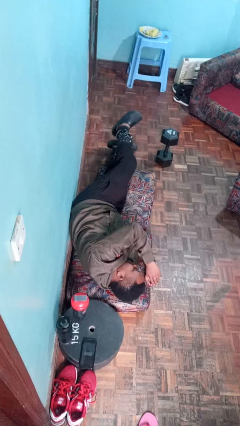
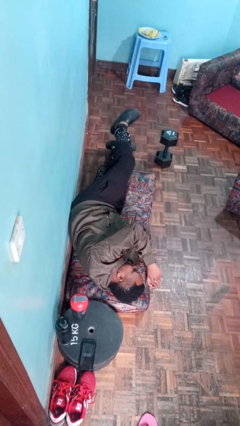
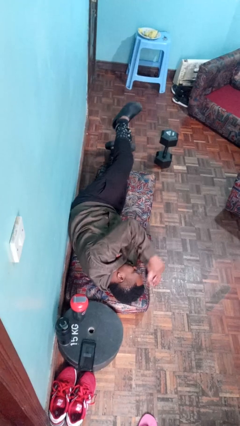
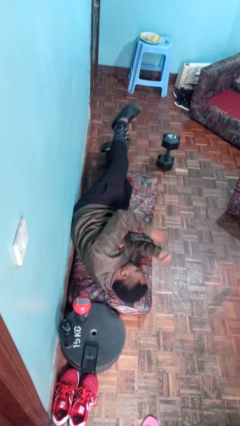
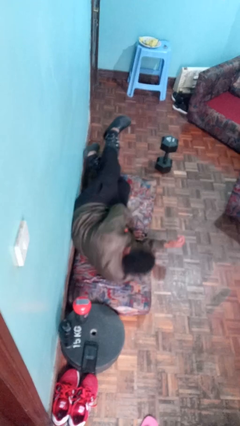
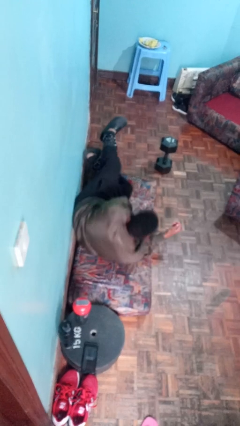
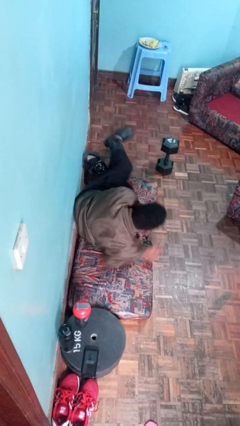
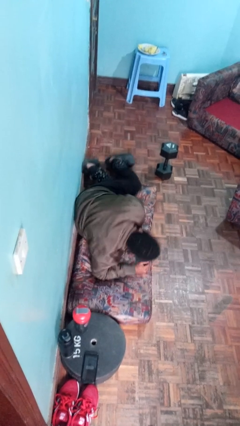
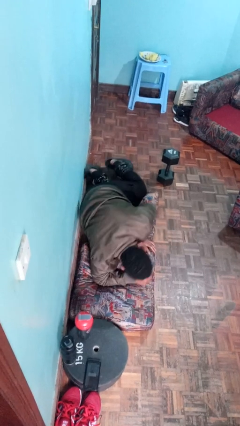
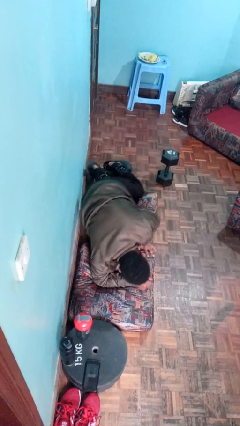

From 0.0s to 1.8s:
person stands up from floor

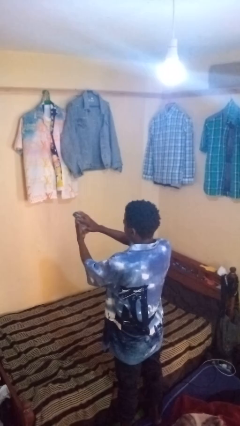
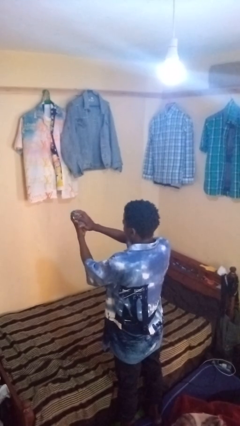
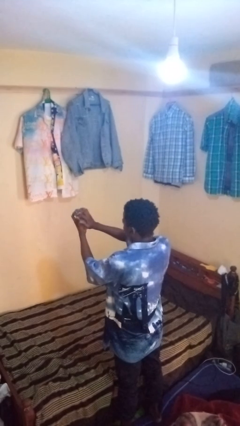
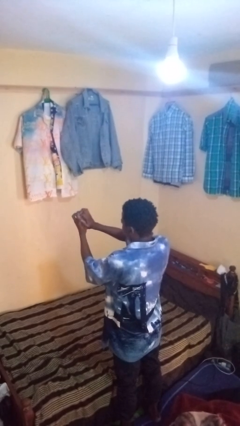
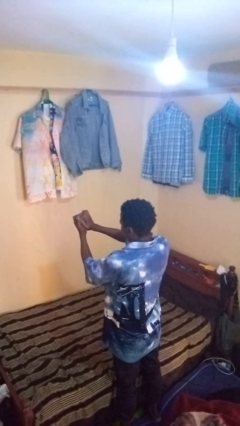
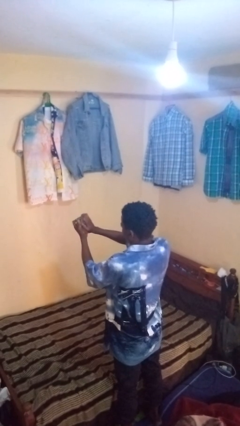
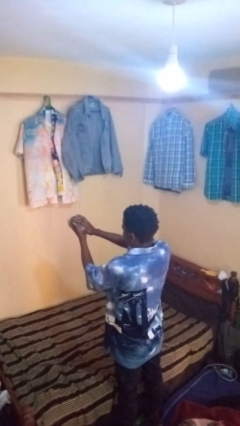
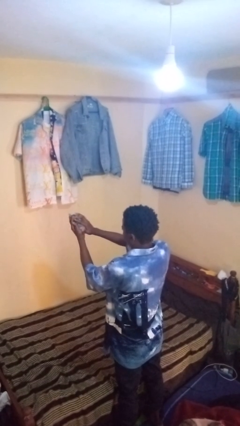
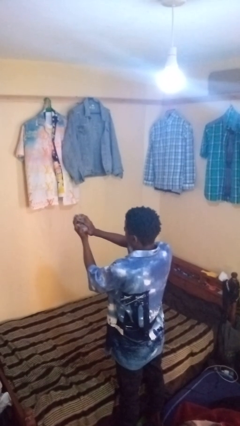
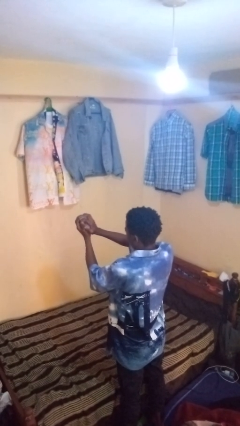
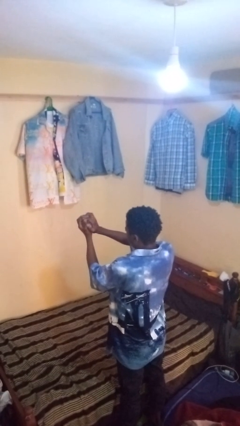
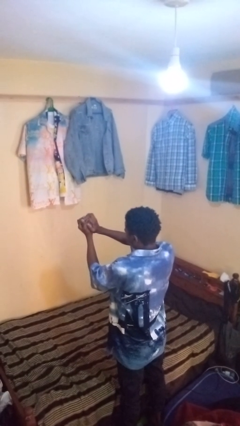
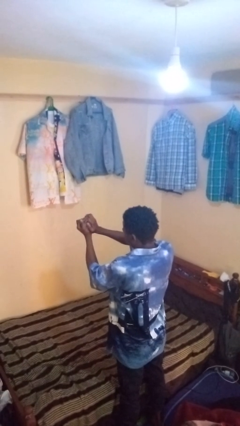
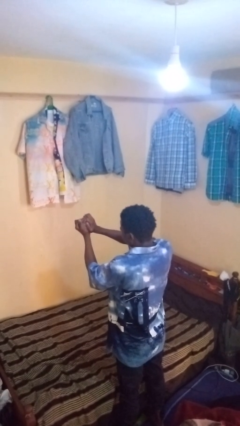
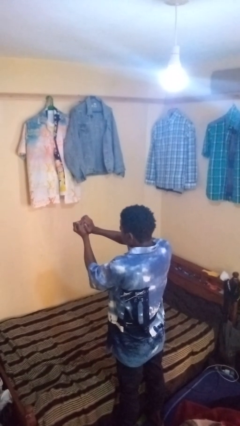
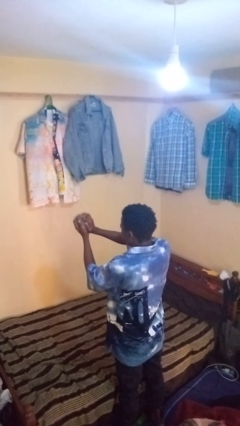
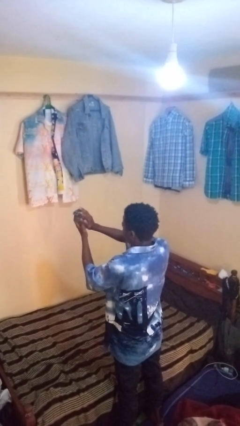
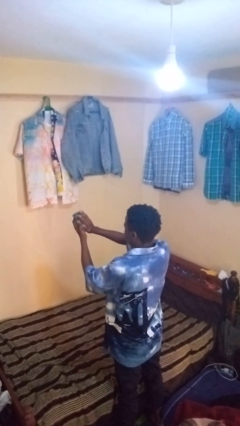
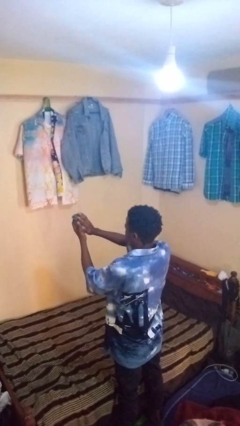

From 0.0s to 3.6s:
person squeezes object

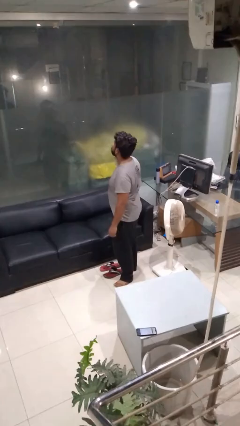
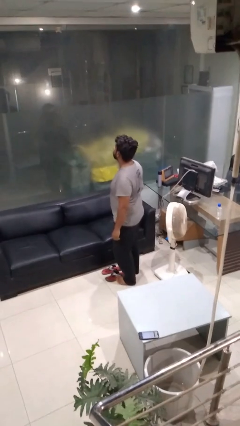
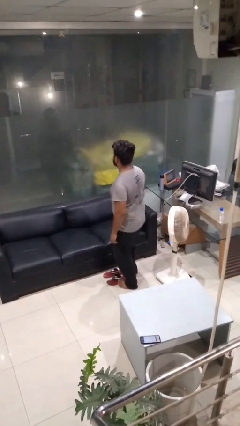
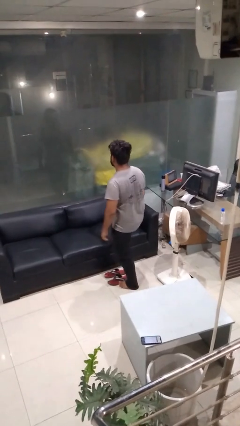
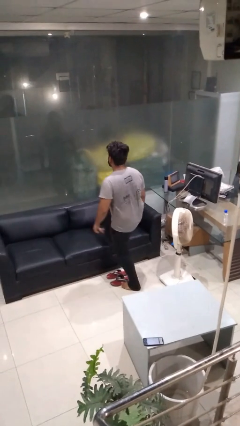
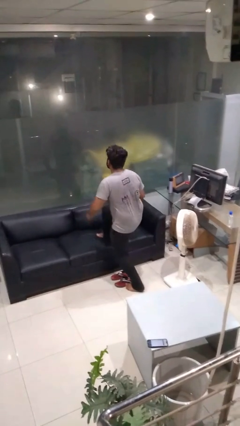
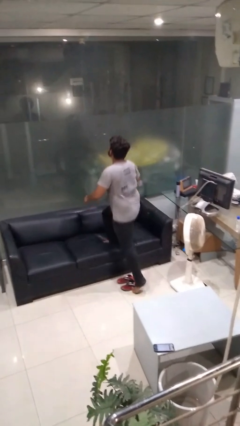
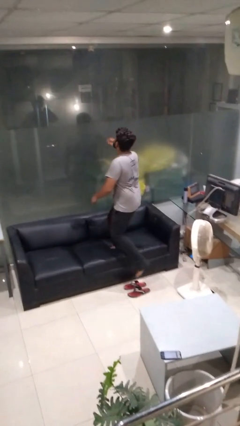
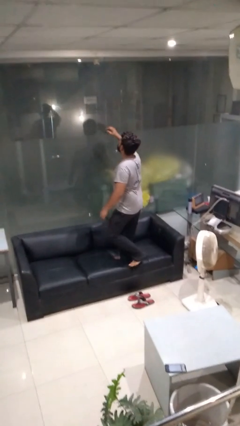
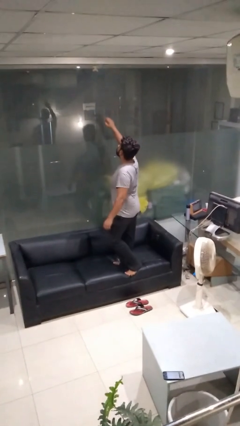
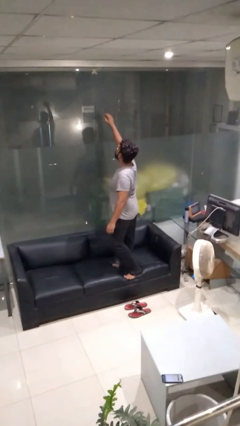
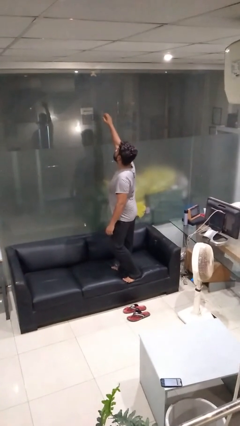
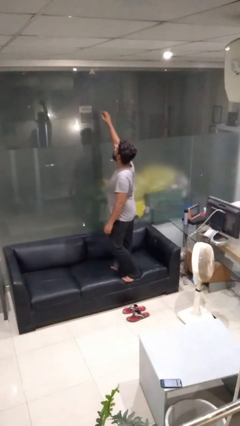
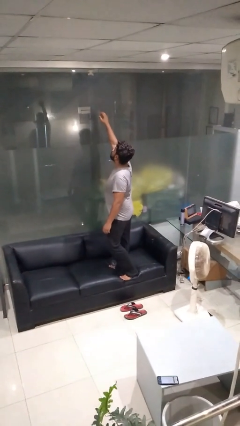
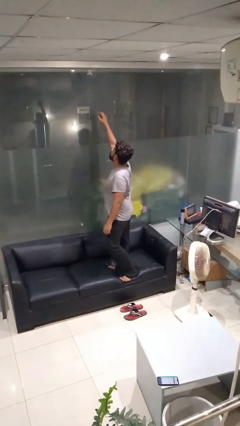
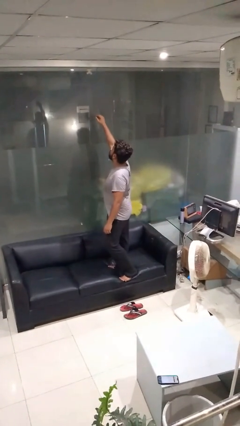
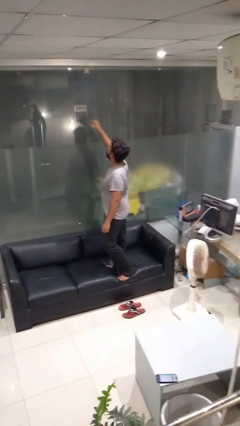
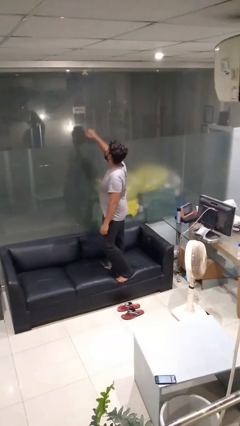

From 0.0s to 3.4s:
person climbs on couch

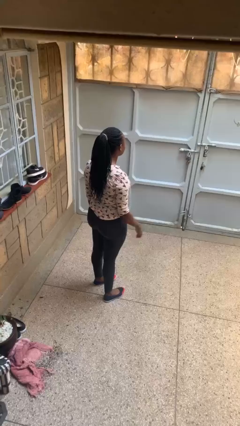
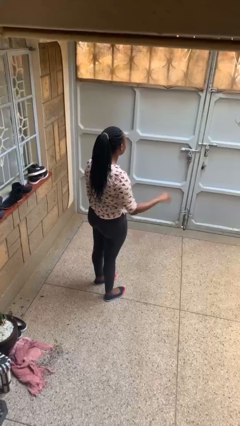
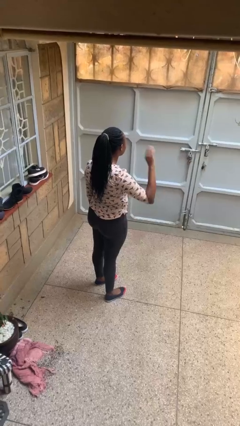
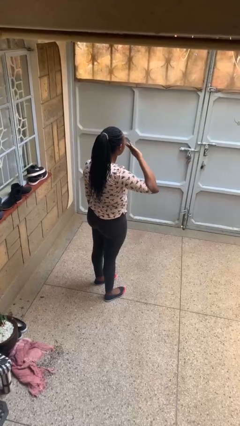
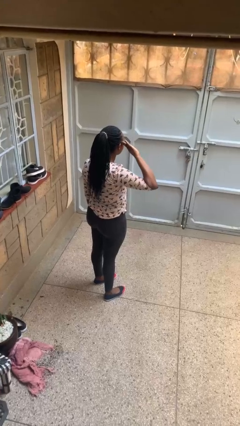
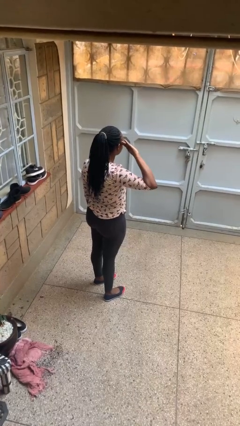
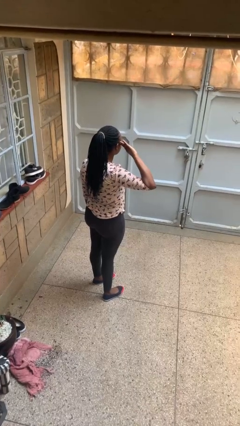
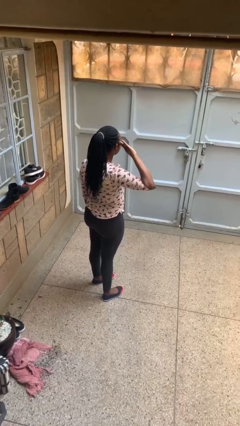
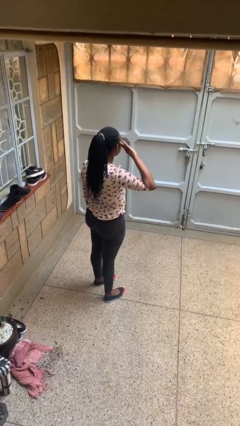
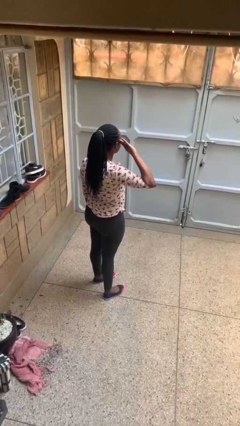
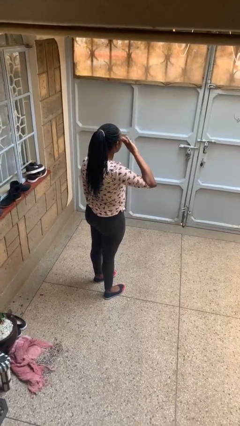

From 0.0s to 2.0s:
person salutes

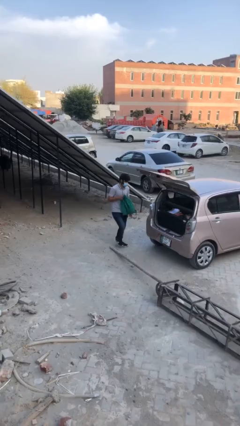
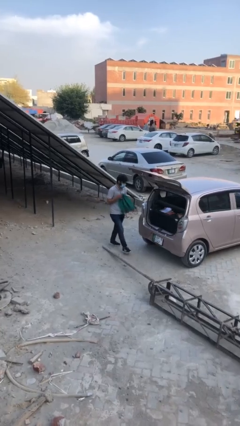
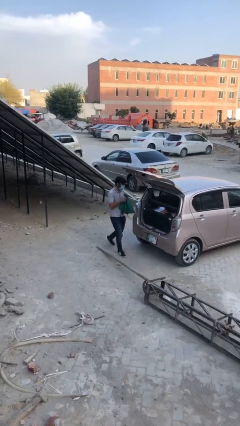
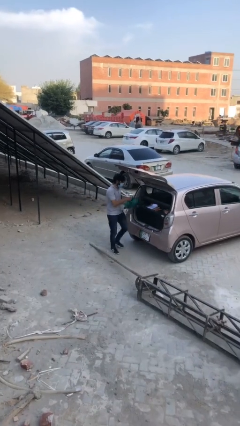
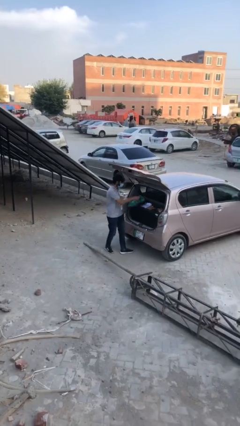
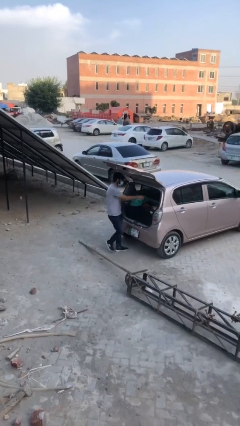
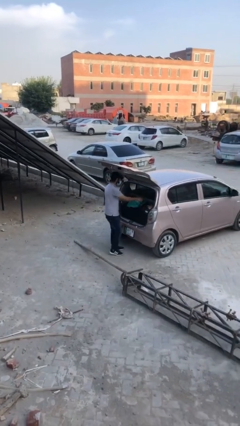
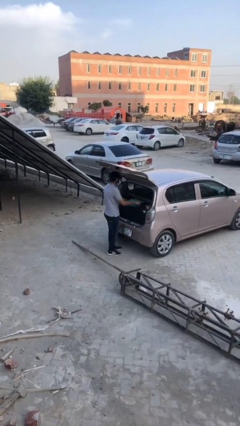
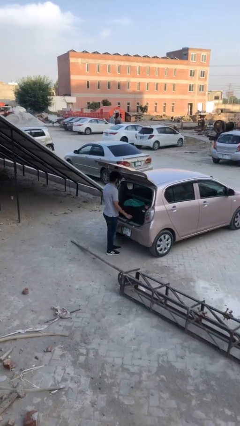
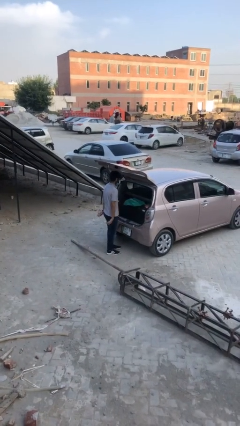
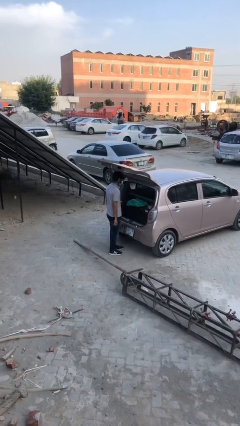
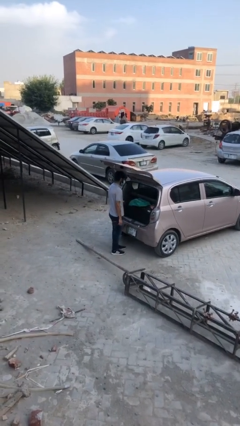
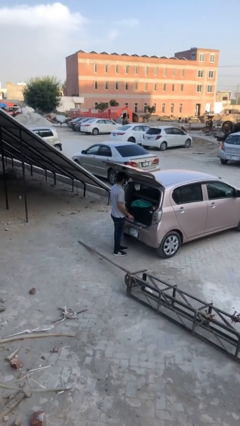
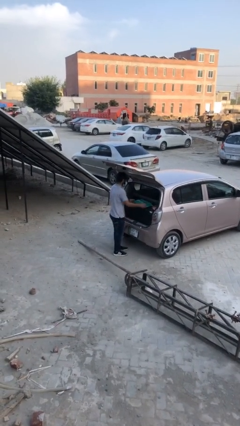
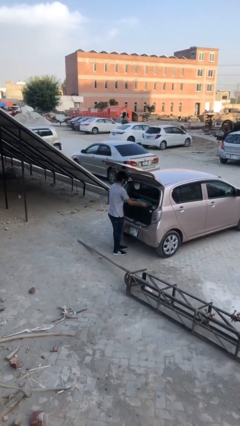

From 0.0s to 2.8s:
person loads car

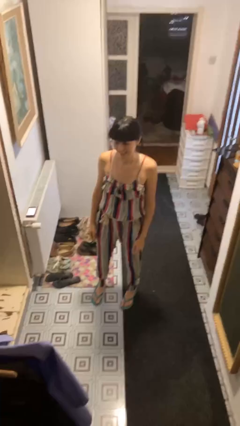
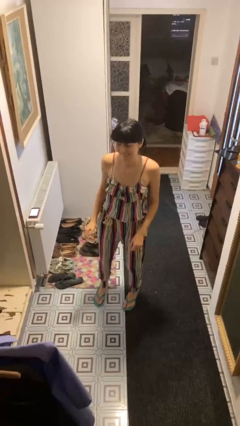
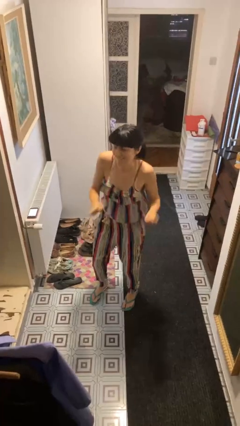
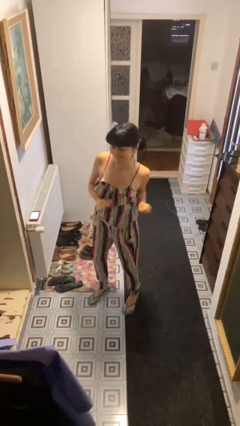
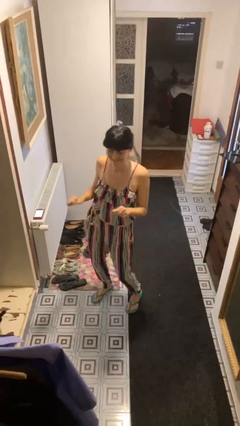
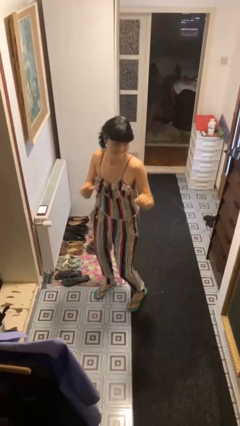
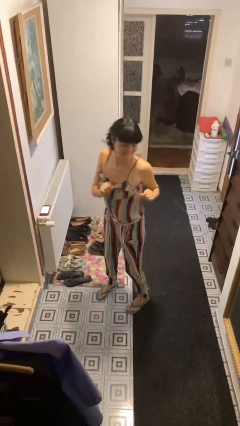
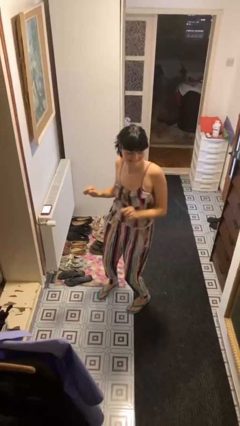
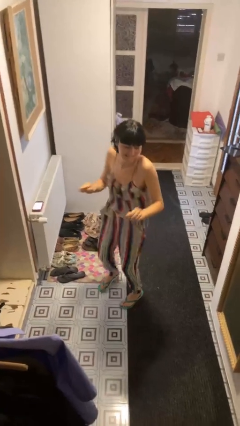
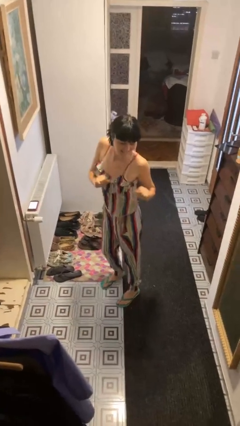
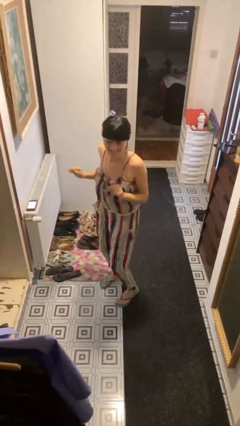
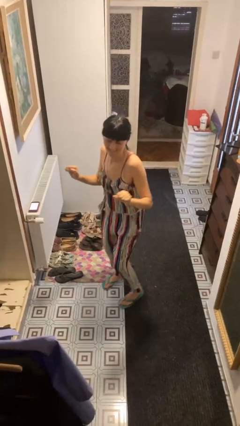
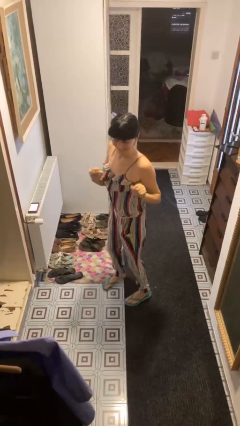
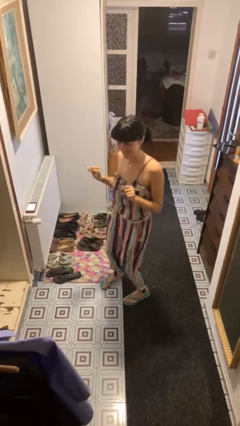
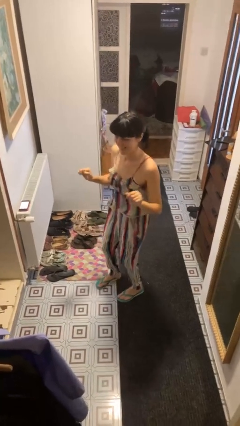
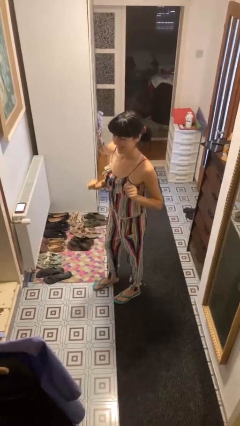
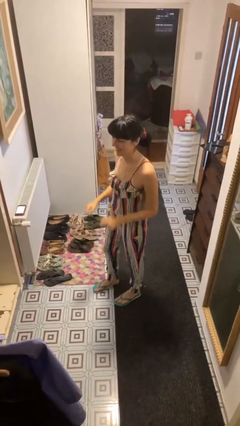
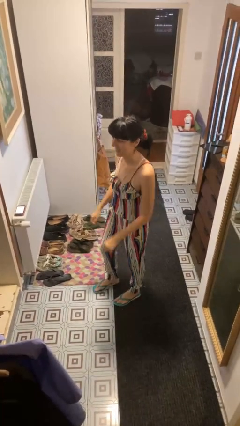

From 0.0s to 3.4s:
person dances in place
